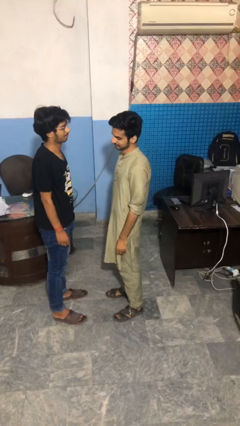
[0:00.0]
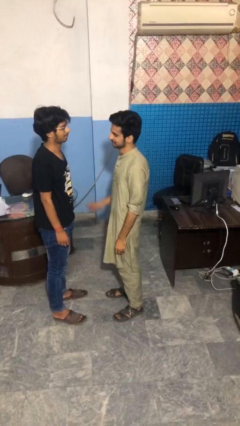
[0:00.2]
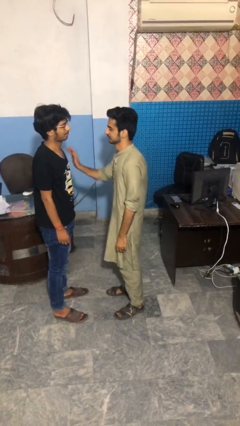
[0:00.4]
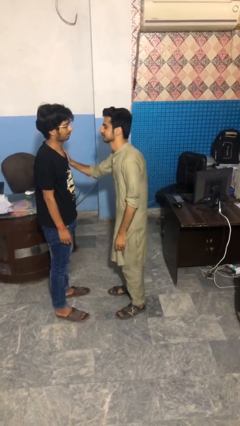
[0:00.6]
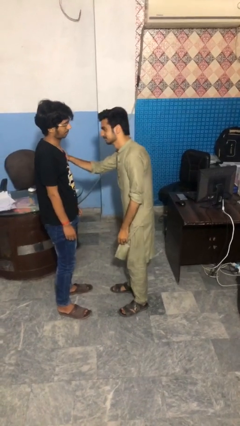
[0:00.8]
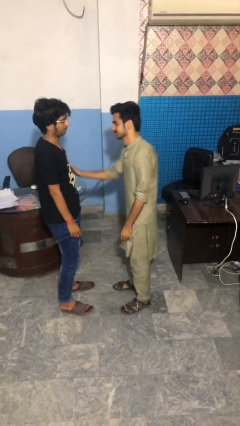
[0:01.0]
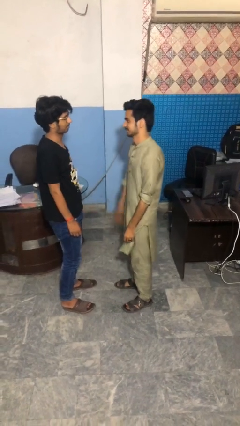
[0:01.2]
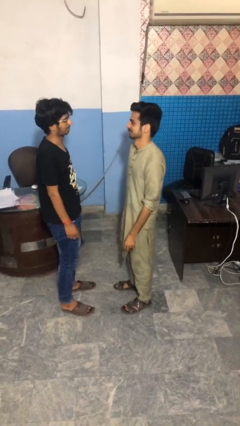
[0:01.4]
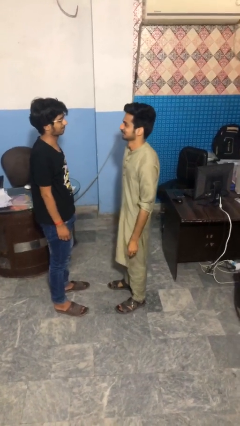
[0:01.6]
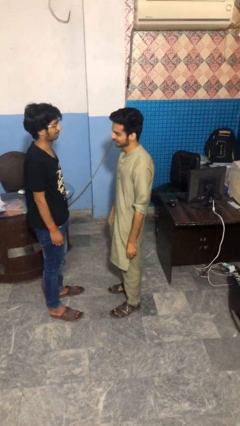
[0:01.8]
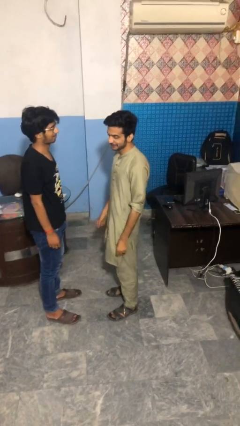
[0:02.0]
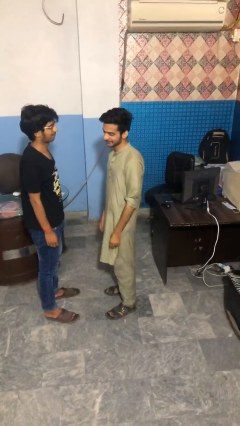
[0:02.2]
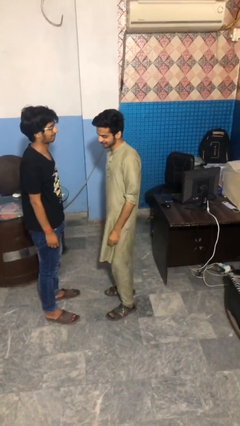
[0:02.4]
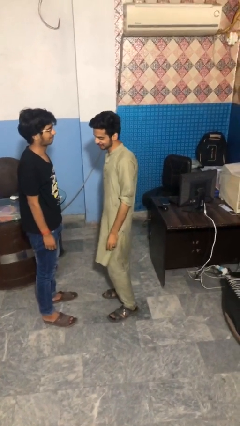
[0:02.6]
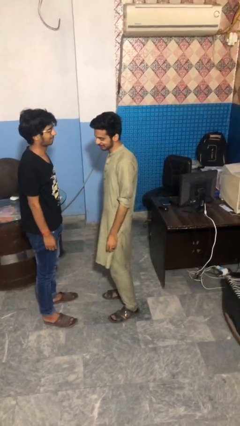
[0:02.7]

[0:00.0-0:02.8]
person shoves person

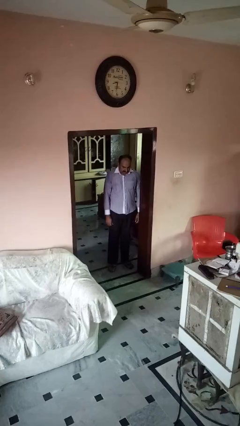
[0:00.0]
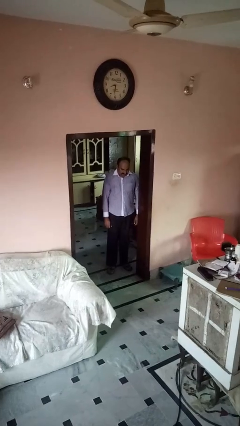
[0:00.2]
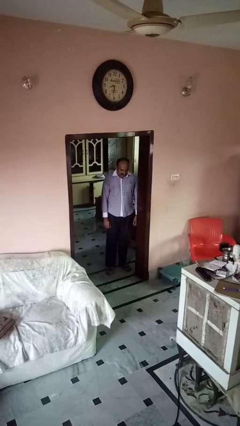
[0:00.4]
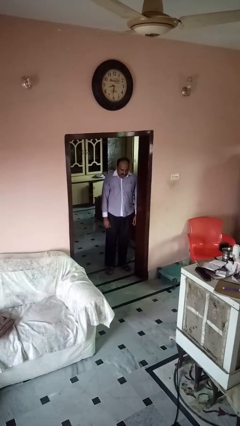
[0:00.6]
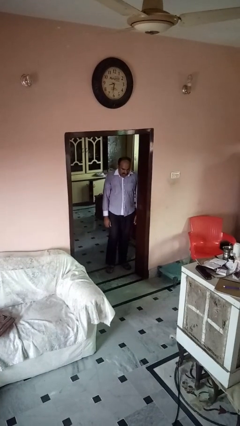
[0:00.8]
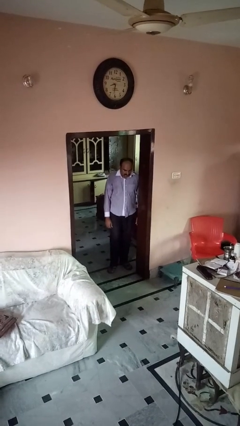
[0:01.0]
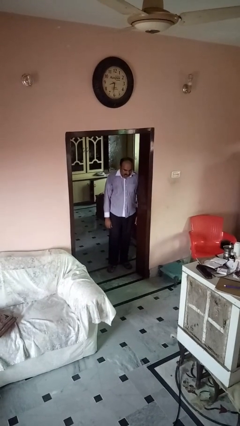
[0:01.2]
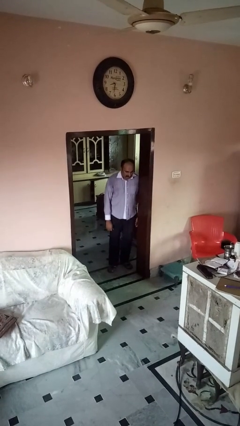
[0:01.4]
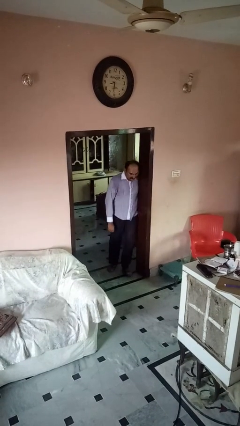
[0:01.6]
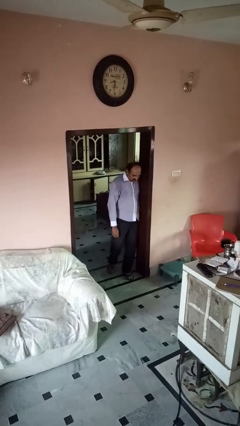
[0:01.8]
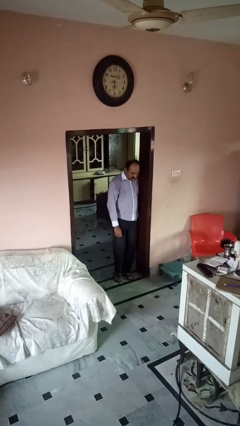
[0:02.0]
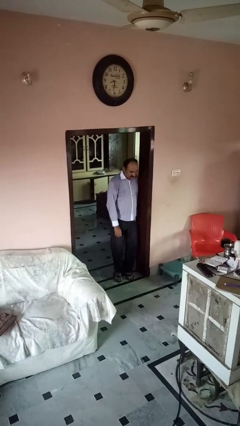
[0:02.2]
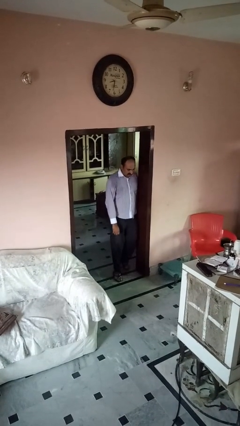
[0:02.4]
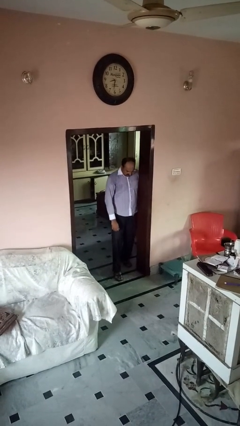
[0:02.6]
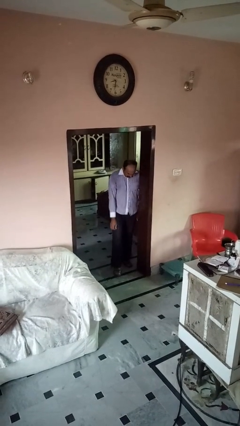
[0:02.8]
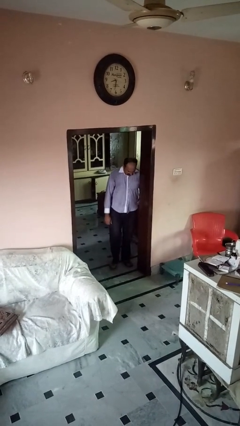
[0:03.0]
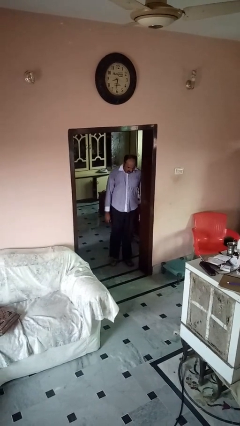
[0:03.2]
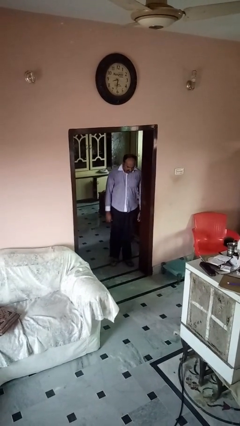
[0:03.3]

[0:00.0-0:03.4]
person bumps into wall

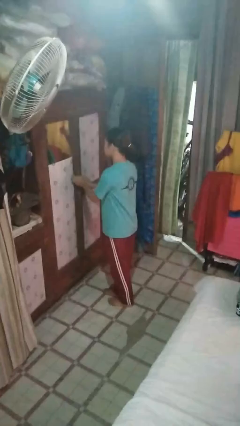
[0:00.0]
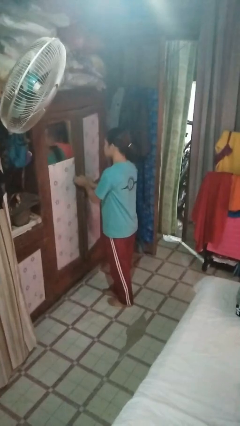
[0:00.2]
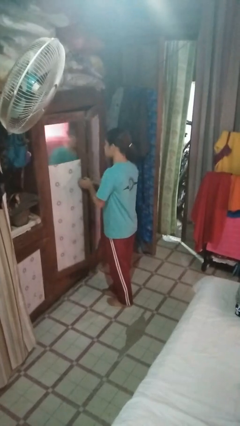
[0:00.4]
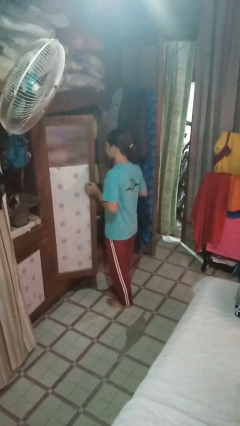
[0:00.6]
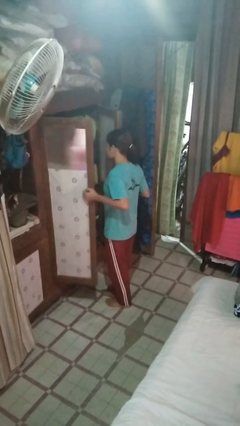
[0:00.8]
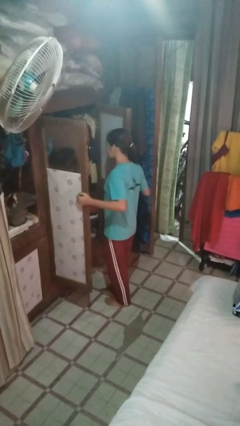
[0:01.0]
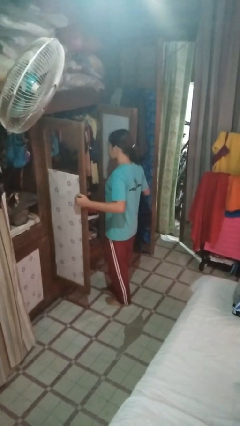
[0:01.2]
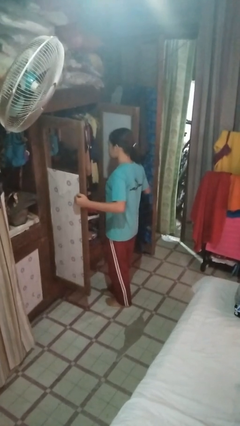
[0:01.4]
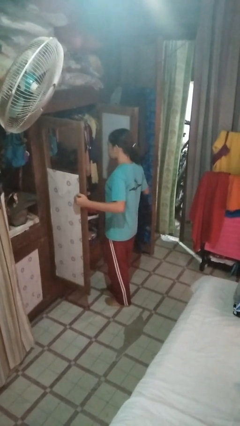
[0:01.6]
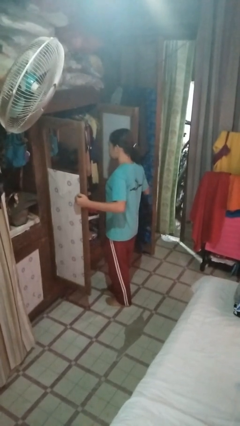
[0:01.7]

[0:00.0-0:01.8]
person opens closet door

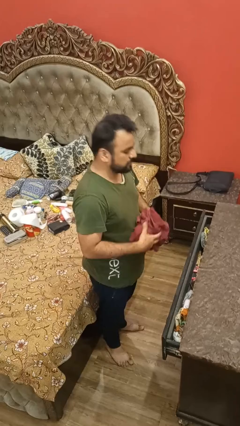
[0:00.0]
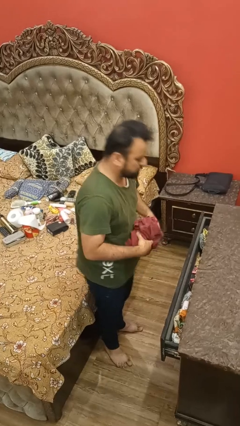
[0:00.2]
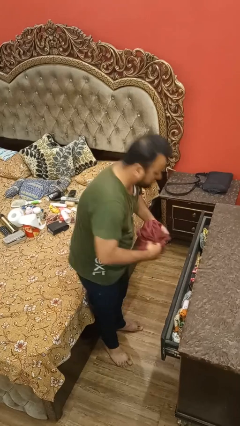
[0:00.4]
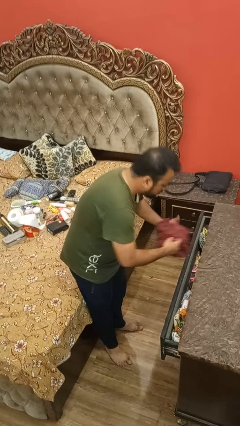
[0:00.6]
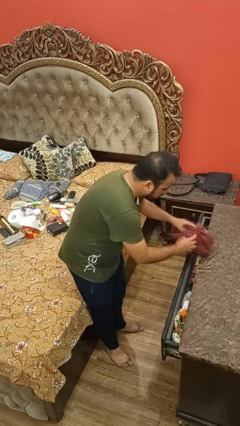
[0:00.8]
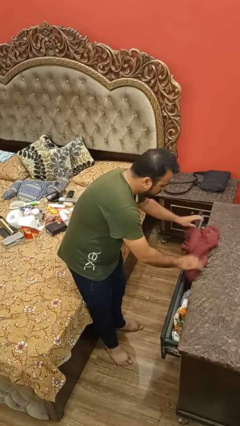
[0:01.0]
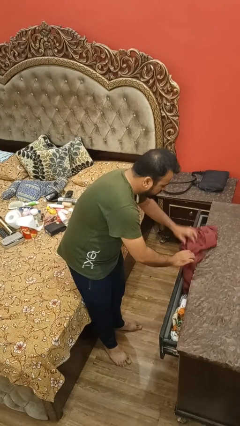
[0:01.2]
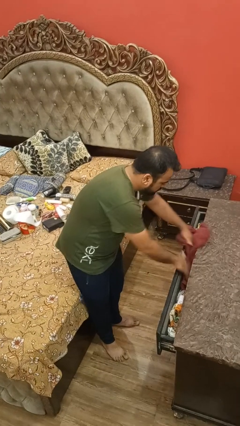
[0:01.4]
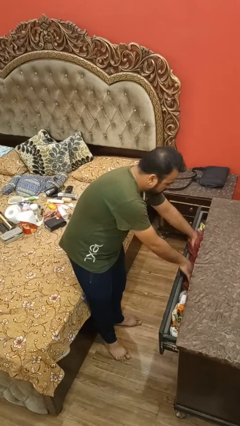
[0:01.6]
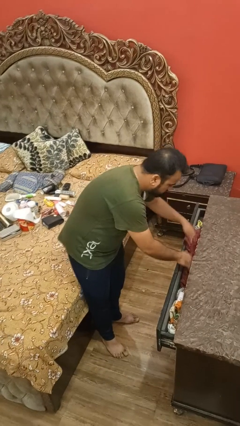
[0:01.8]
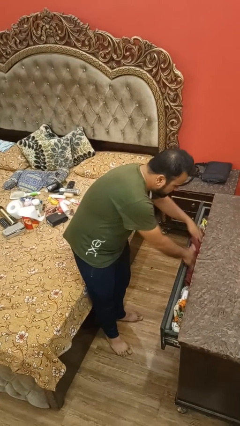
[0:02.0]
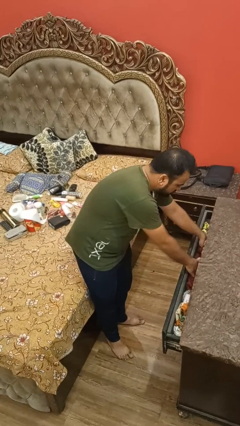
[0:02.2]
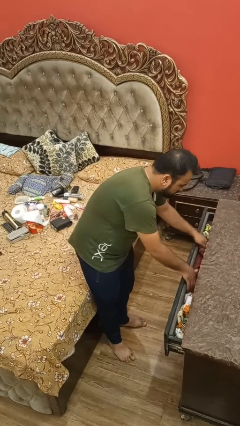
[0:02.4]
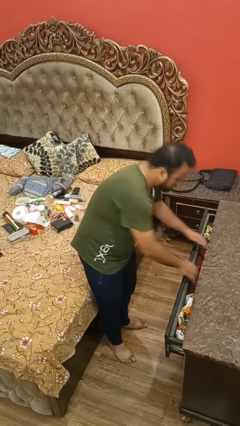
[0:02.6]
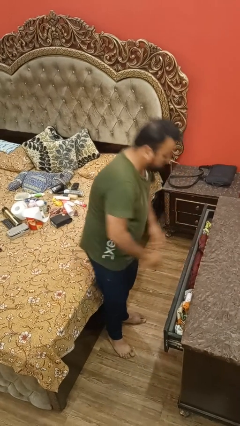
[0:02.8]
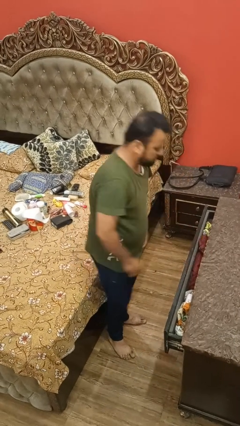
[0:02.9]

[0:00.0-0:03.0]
person puts clothes into dresser

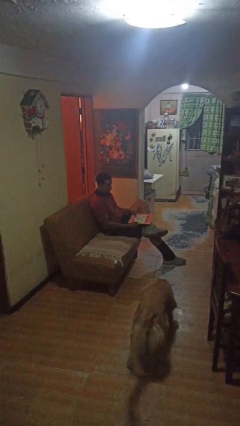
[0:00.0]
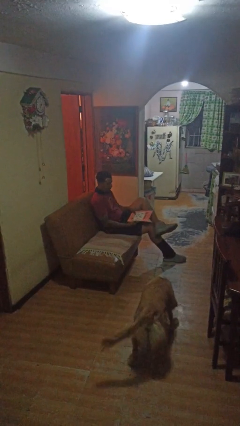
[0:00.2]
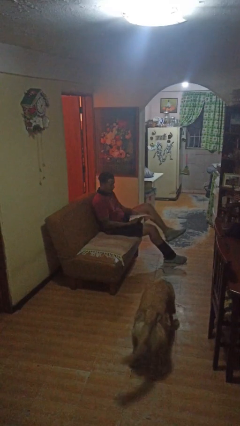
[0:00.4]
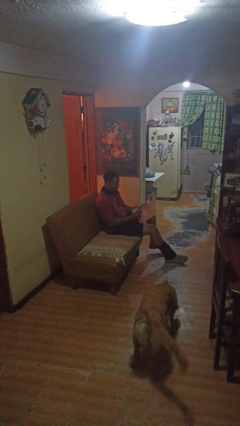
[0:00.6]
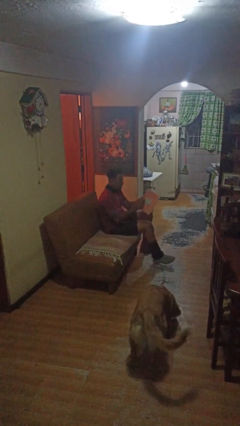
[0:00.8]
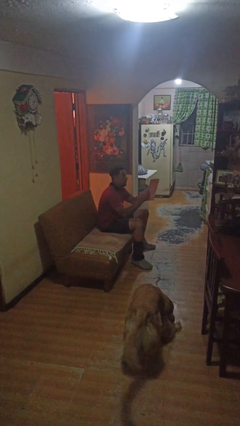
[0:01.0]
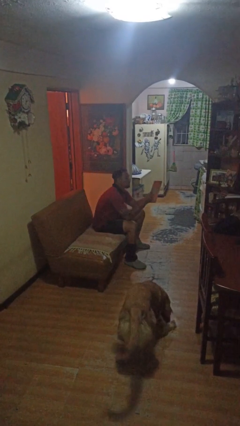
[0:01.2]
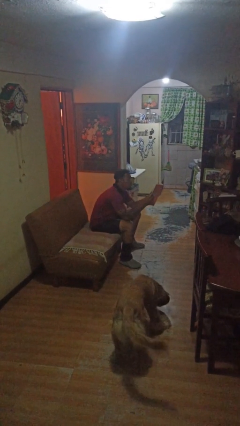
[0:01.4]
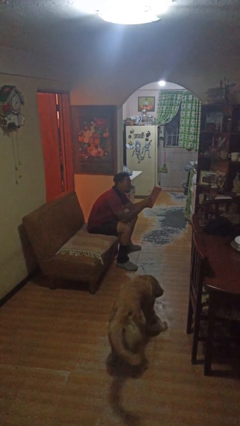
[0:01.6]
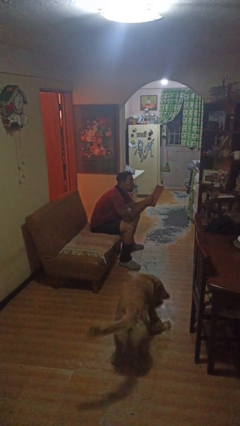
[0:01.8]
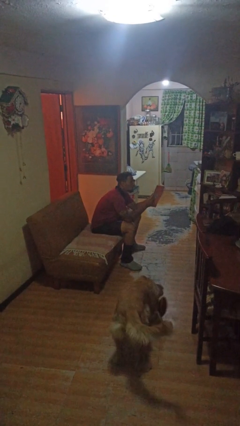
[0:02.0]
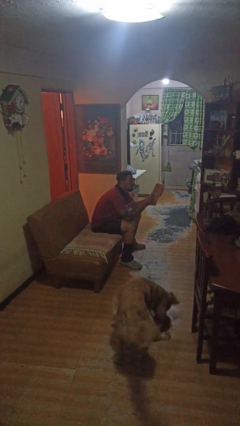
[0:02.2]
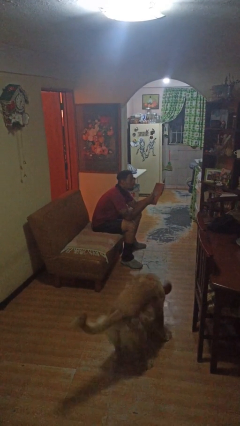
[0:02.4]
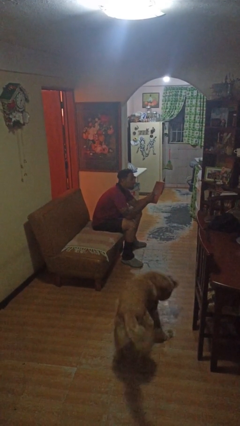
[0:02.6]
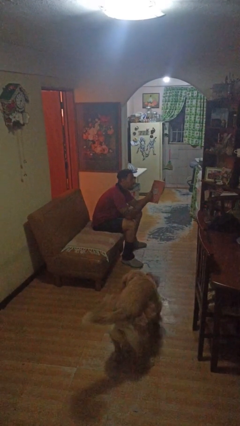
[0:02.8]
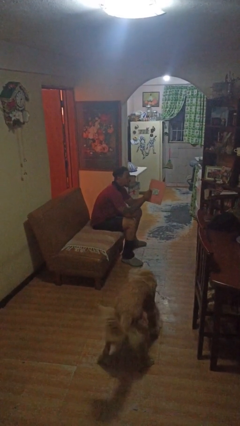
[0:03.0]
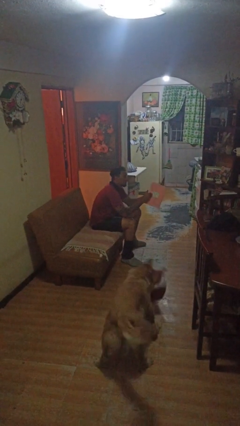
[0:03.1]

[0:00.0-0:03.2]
person reads document

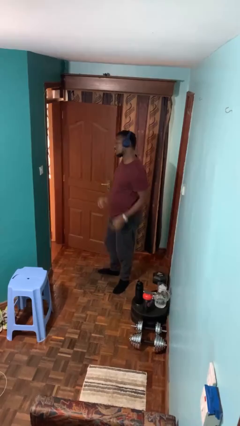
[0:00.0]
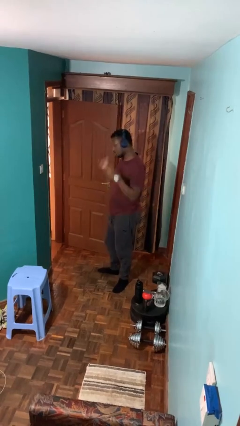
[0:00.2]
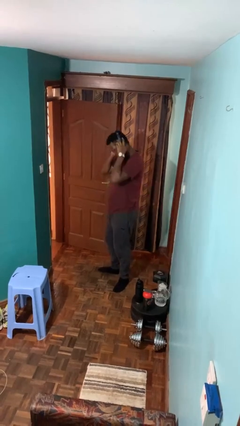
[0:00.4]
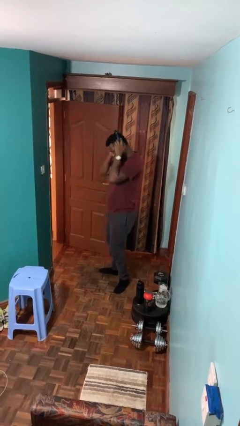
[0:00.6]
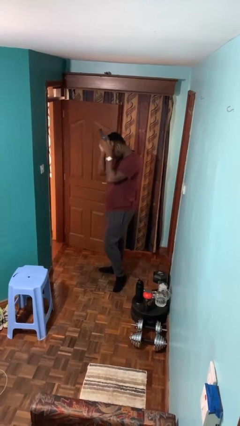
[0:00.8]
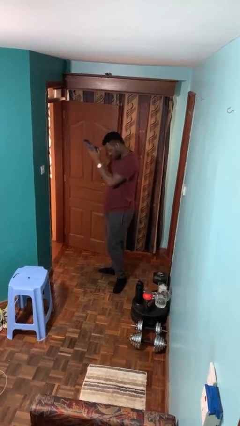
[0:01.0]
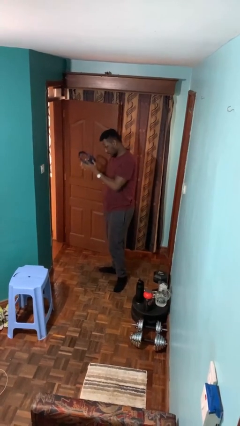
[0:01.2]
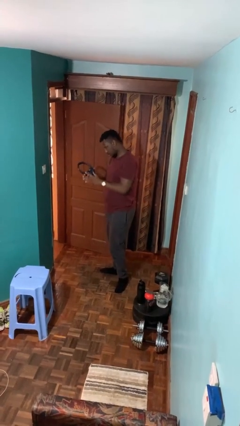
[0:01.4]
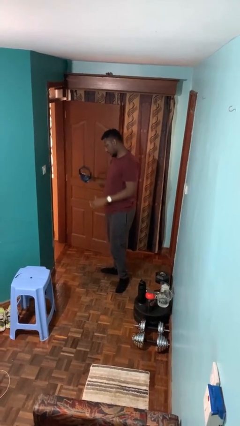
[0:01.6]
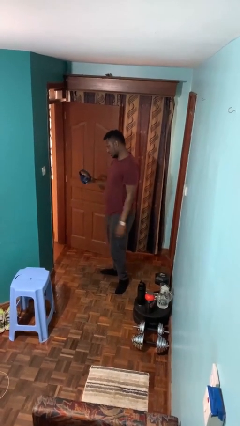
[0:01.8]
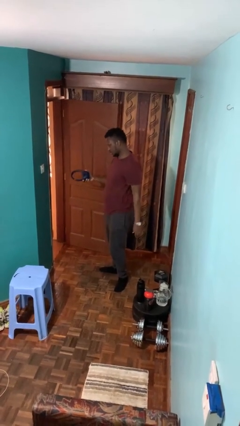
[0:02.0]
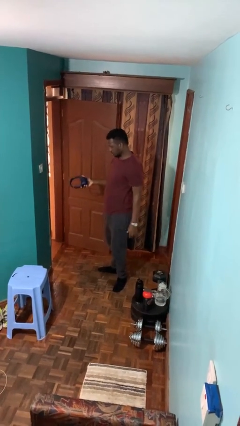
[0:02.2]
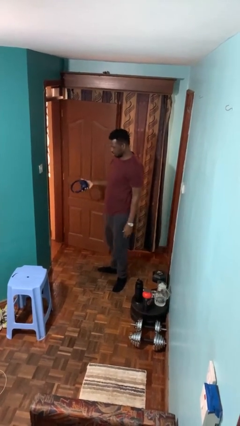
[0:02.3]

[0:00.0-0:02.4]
person takes off headphones

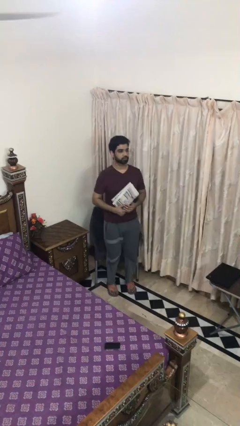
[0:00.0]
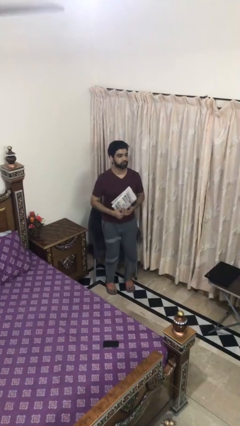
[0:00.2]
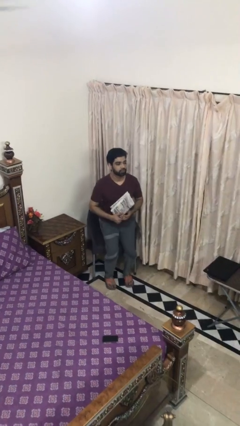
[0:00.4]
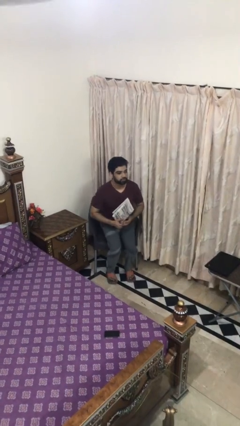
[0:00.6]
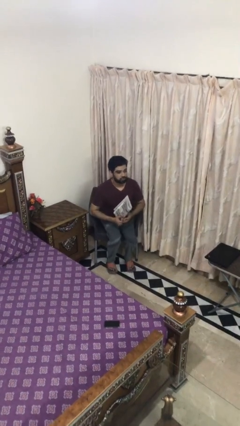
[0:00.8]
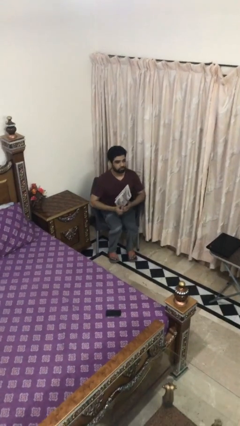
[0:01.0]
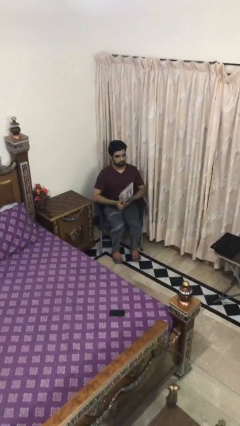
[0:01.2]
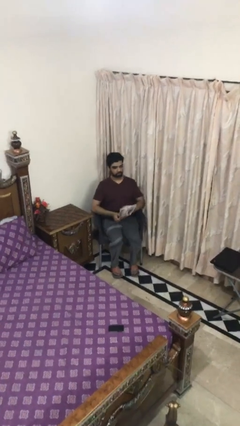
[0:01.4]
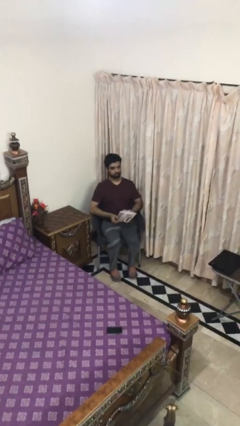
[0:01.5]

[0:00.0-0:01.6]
person sits down
